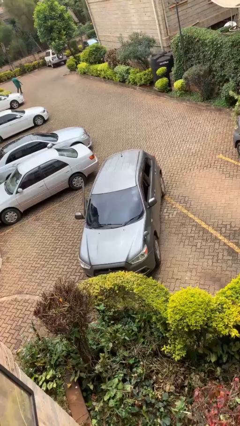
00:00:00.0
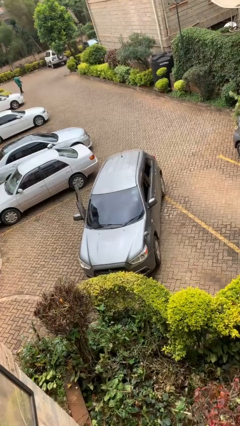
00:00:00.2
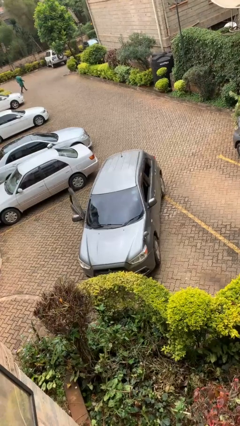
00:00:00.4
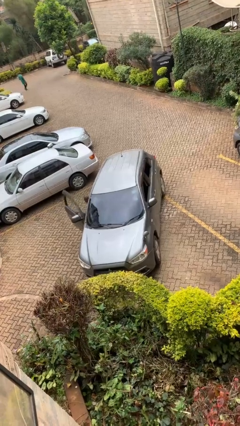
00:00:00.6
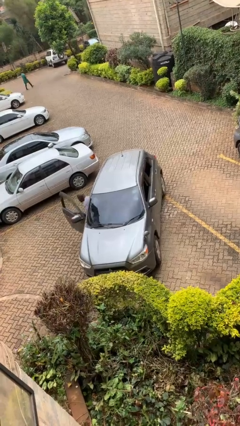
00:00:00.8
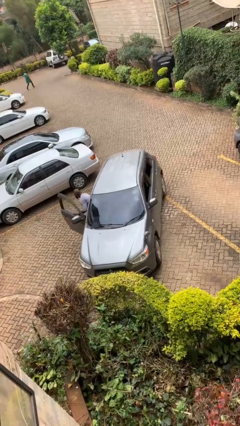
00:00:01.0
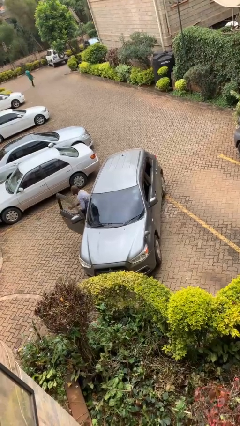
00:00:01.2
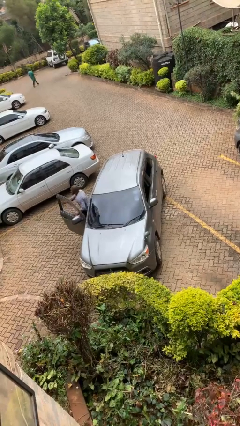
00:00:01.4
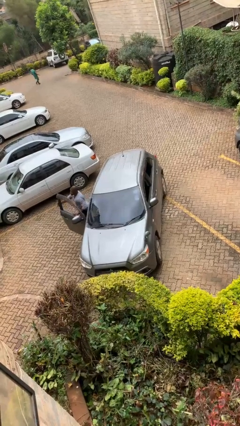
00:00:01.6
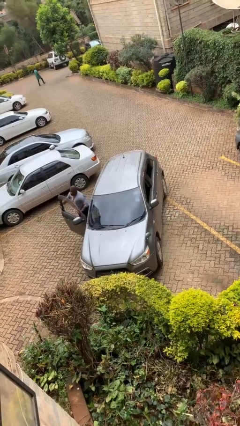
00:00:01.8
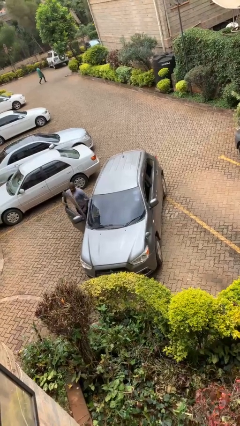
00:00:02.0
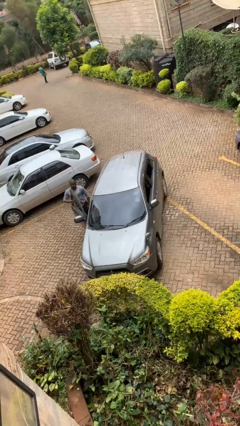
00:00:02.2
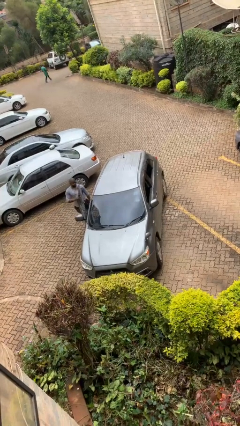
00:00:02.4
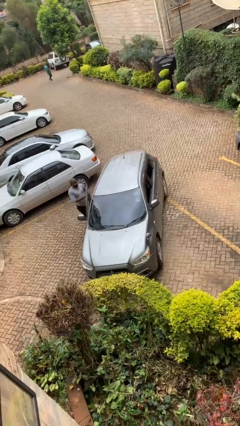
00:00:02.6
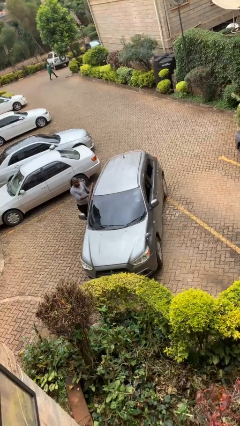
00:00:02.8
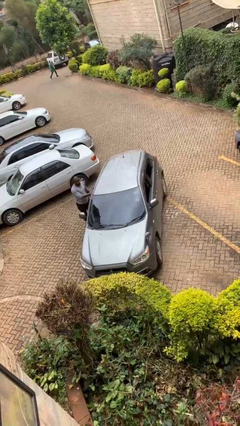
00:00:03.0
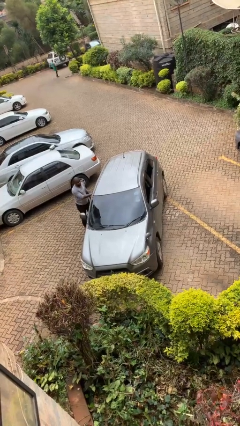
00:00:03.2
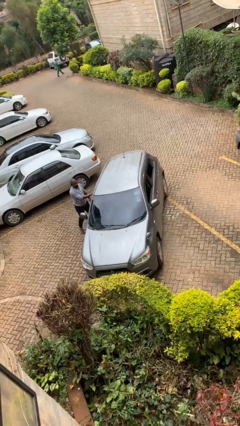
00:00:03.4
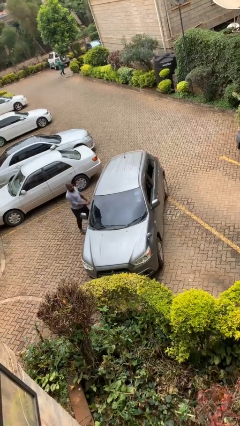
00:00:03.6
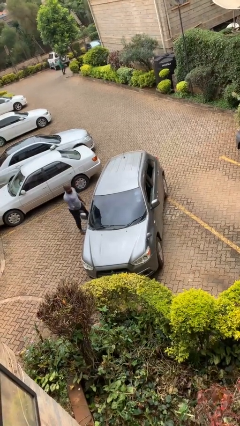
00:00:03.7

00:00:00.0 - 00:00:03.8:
car drops off person

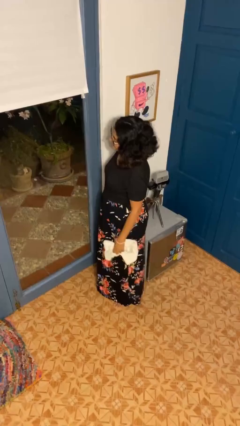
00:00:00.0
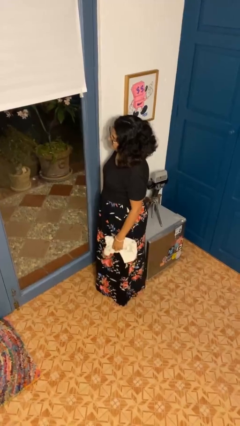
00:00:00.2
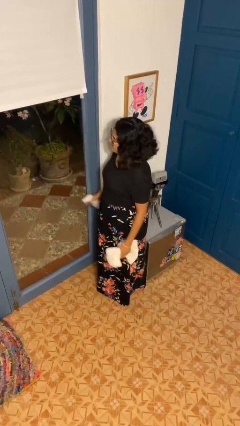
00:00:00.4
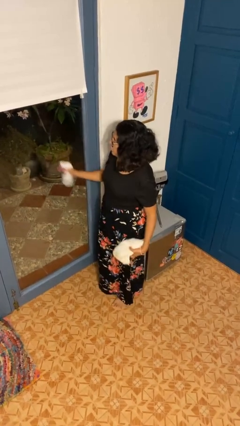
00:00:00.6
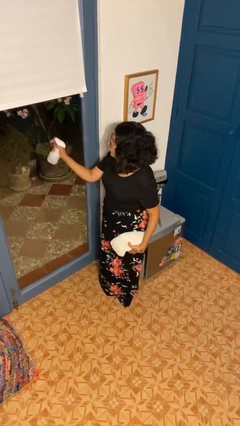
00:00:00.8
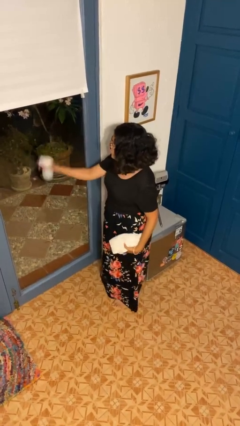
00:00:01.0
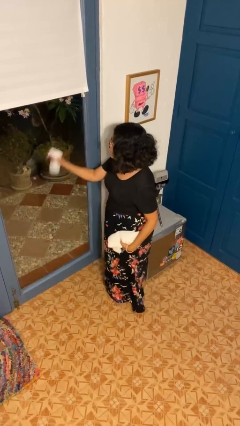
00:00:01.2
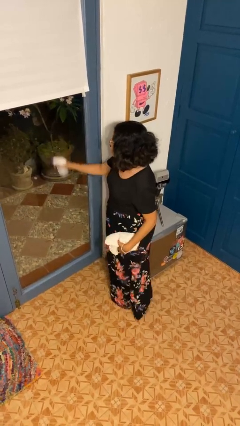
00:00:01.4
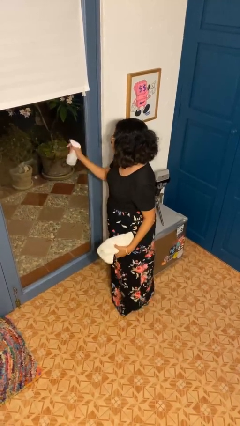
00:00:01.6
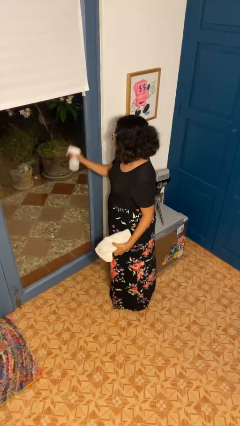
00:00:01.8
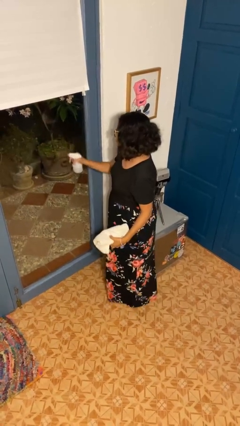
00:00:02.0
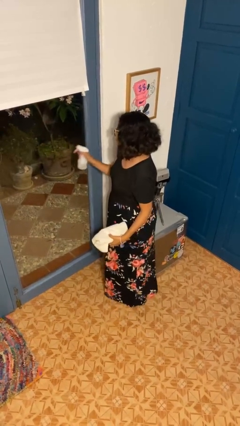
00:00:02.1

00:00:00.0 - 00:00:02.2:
person sprays from bottle

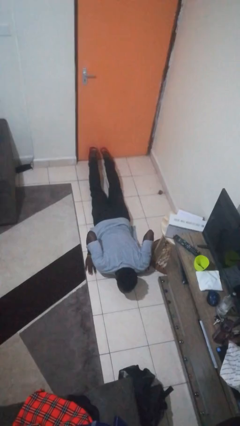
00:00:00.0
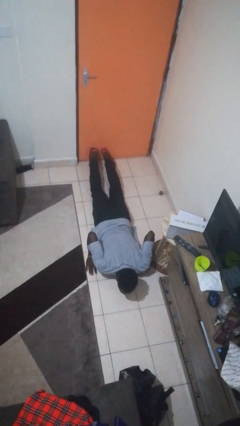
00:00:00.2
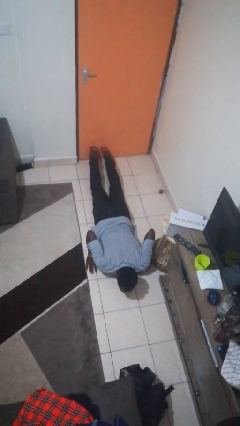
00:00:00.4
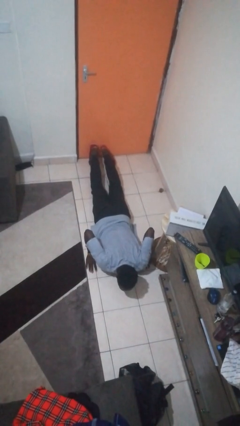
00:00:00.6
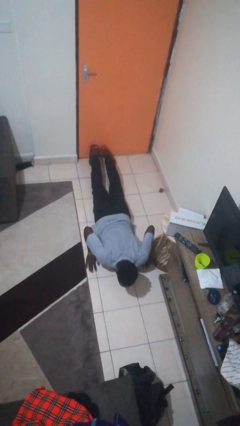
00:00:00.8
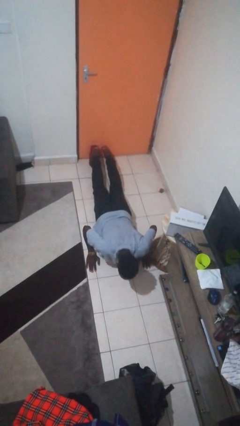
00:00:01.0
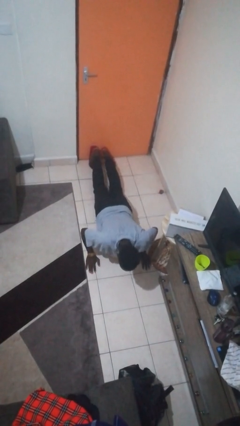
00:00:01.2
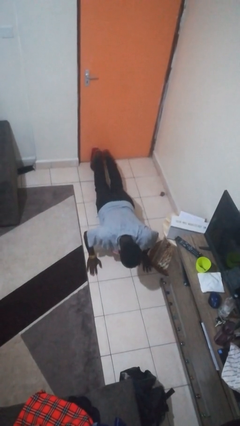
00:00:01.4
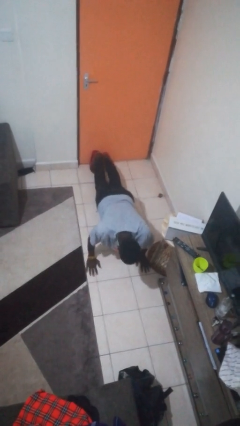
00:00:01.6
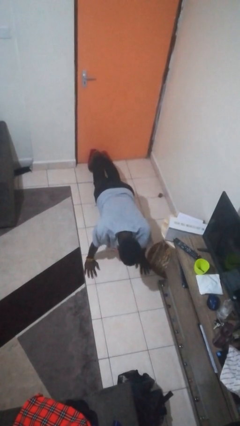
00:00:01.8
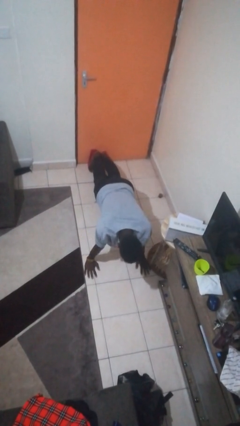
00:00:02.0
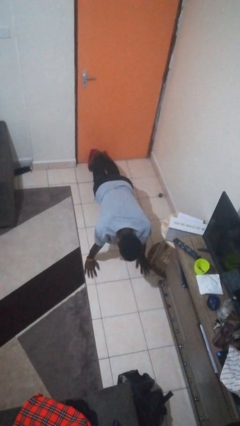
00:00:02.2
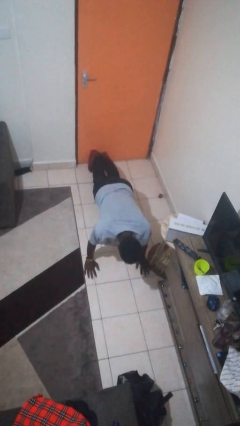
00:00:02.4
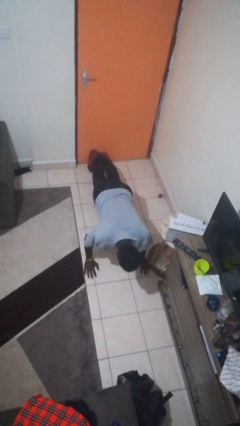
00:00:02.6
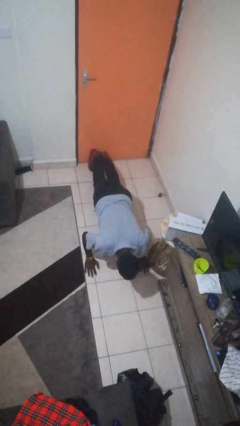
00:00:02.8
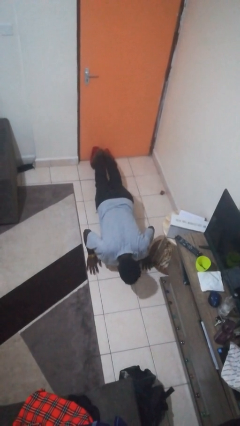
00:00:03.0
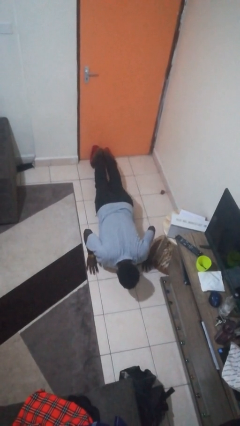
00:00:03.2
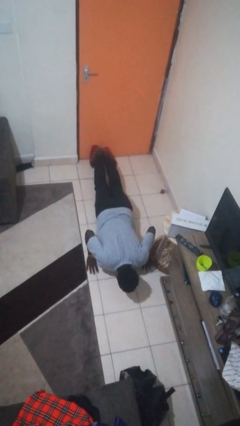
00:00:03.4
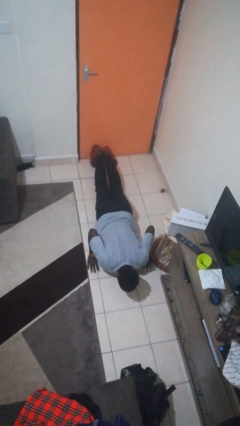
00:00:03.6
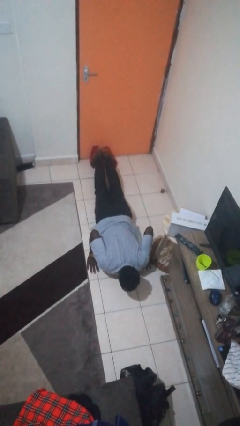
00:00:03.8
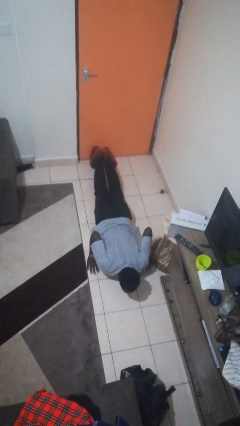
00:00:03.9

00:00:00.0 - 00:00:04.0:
person exercises with pushup

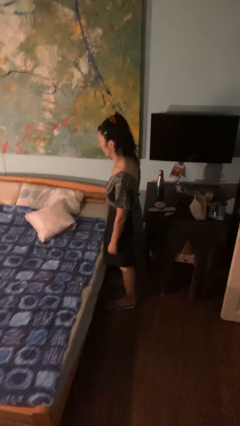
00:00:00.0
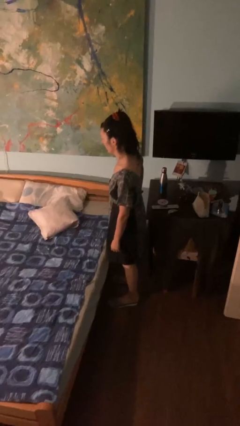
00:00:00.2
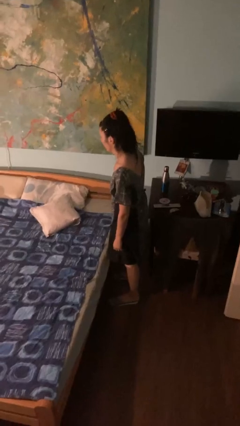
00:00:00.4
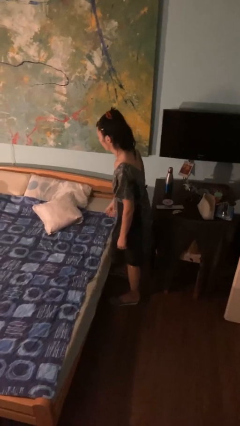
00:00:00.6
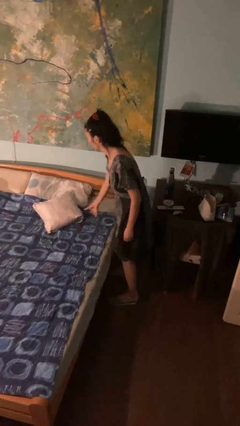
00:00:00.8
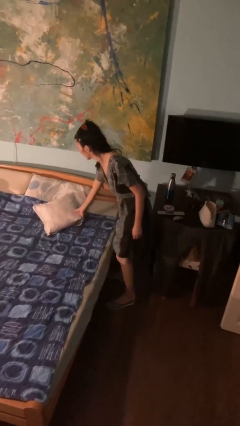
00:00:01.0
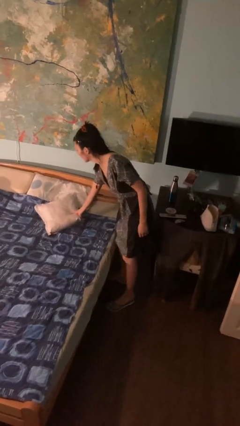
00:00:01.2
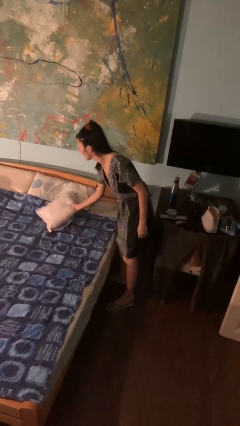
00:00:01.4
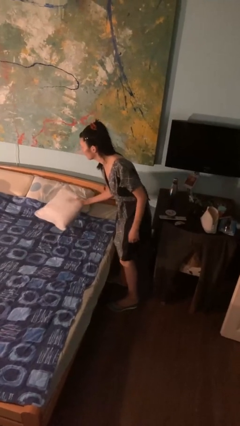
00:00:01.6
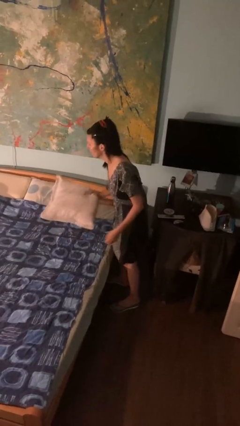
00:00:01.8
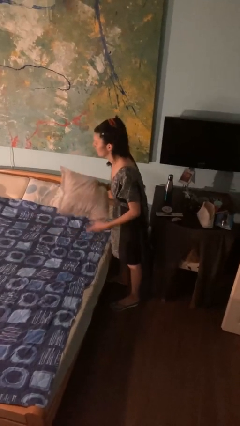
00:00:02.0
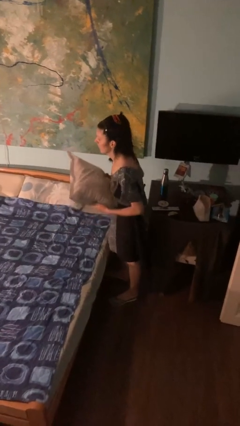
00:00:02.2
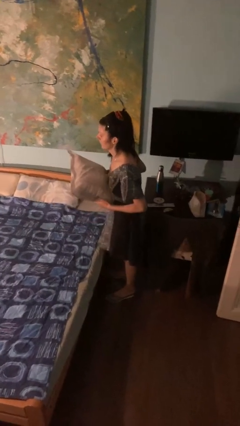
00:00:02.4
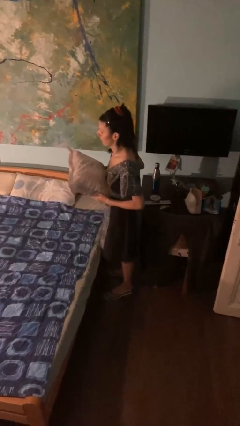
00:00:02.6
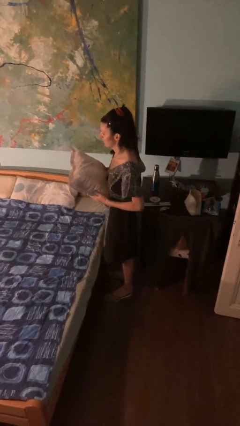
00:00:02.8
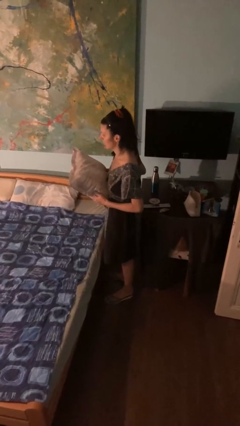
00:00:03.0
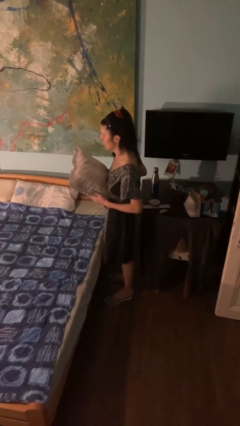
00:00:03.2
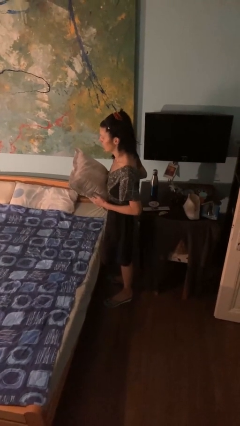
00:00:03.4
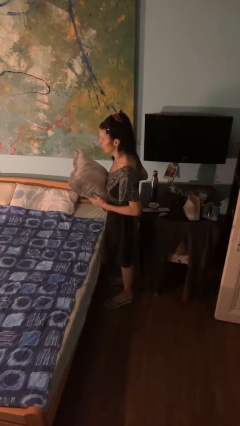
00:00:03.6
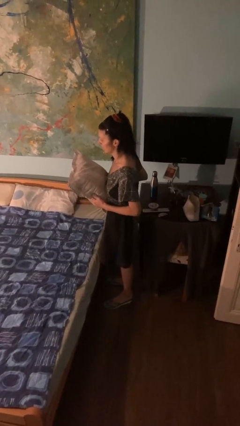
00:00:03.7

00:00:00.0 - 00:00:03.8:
person picks up object from bed

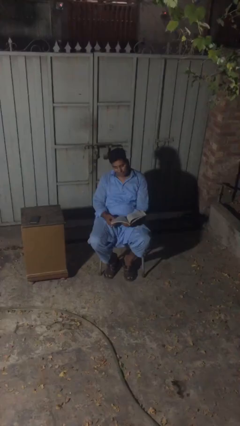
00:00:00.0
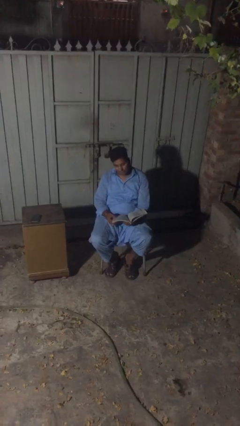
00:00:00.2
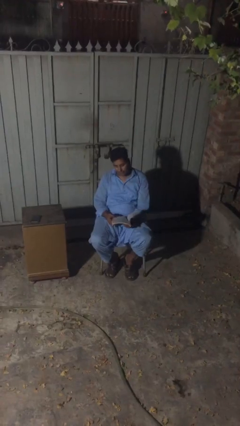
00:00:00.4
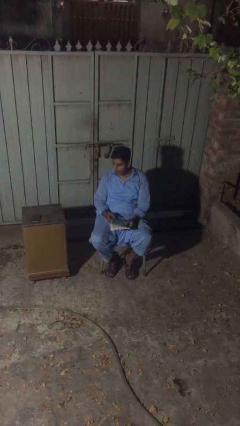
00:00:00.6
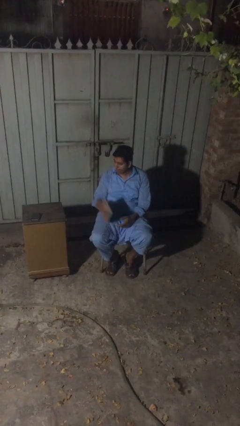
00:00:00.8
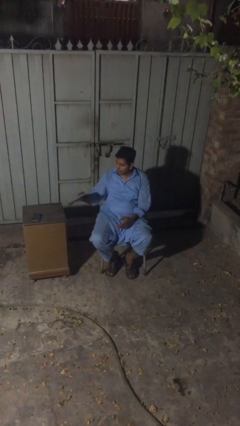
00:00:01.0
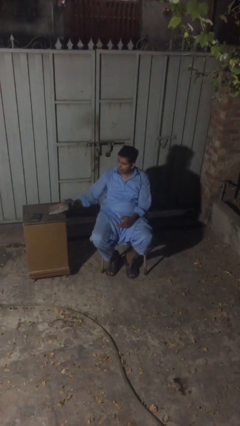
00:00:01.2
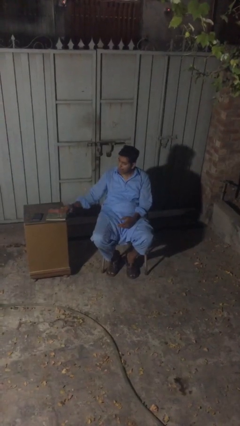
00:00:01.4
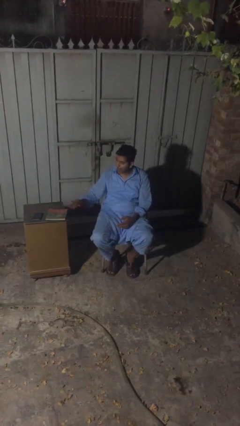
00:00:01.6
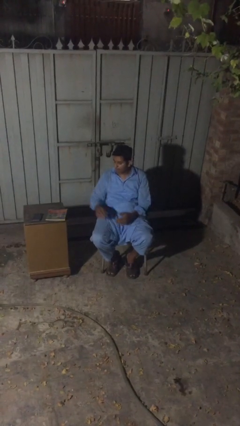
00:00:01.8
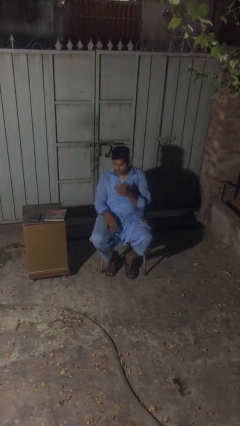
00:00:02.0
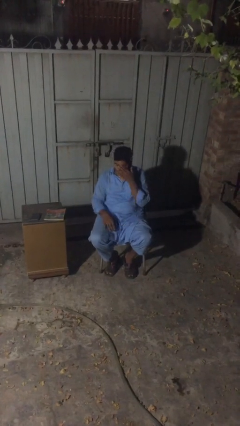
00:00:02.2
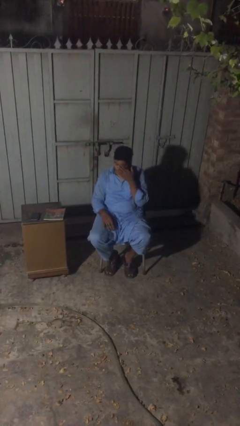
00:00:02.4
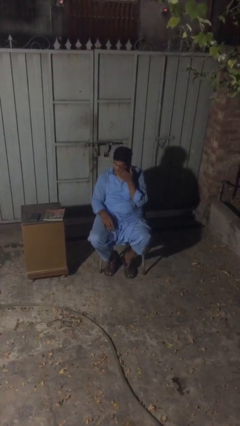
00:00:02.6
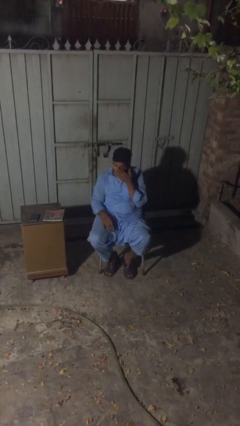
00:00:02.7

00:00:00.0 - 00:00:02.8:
person puts down object on table

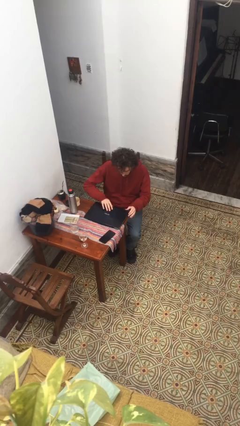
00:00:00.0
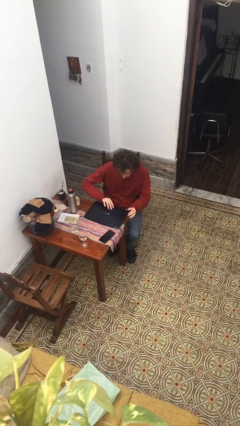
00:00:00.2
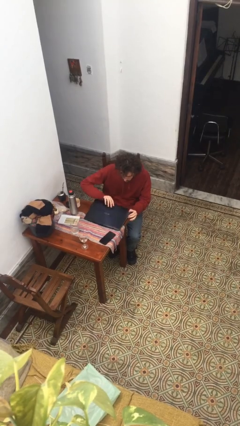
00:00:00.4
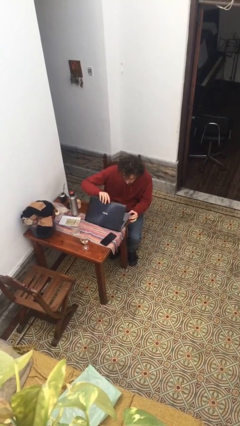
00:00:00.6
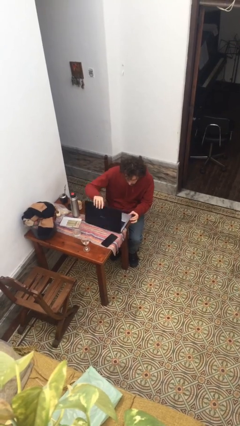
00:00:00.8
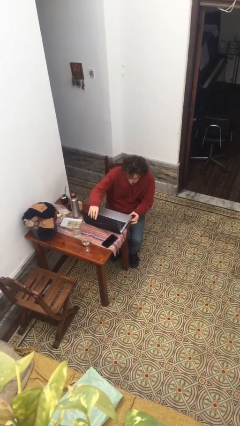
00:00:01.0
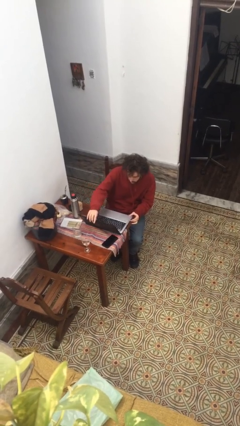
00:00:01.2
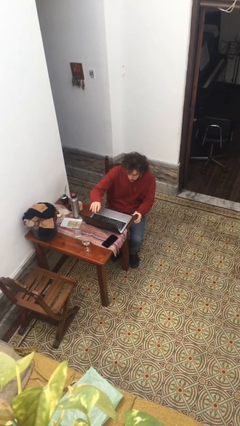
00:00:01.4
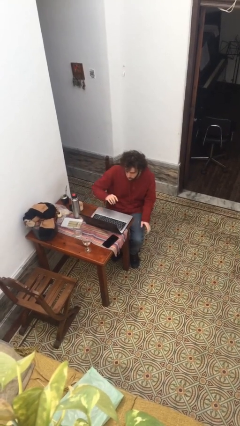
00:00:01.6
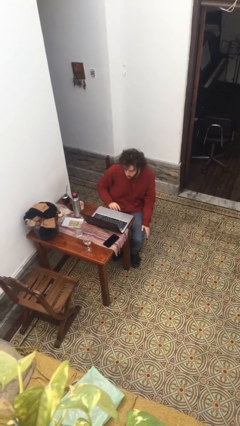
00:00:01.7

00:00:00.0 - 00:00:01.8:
person opens laptop
